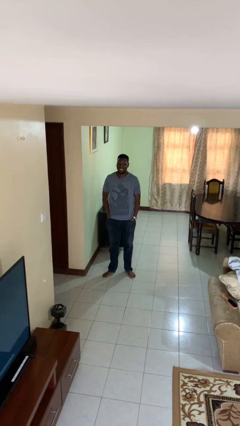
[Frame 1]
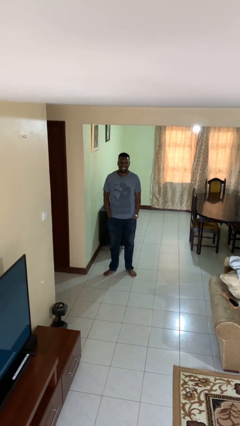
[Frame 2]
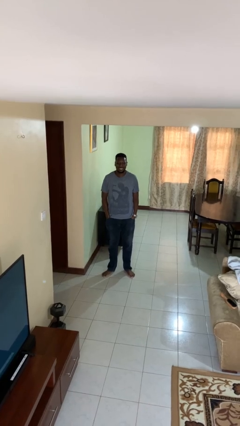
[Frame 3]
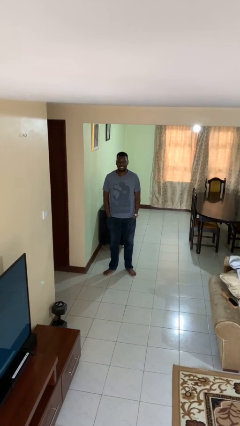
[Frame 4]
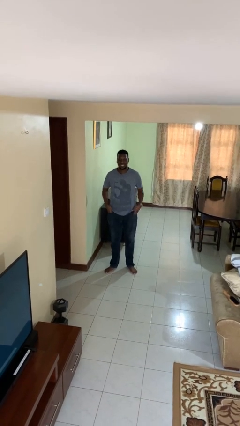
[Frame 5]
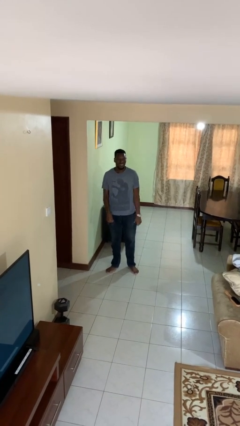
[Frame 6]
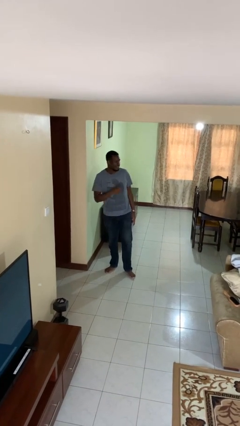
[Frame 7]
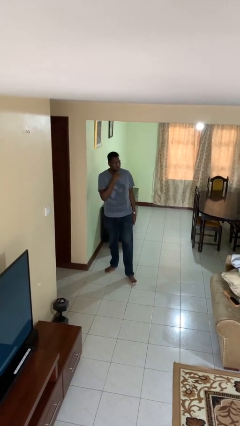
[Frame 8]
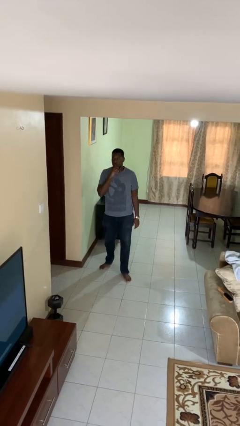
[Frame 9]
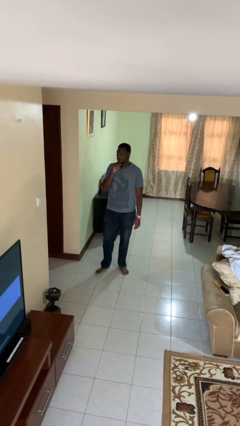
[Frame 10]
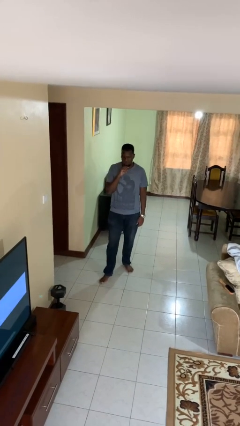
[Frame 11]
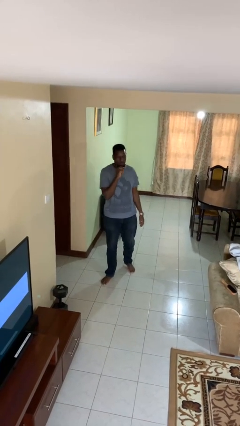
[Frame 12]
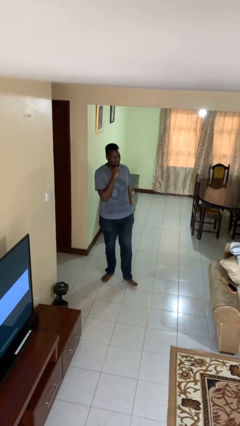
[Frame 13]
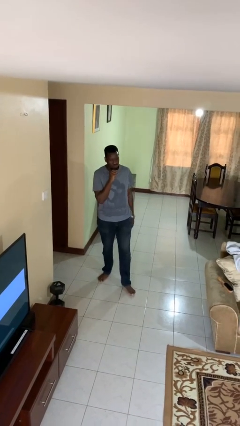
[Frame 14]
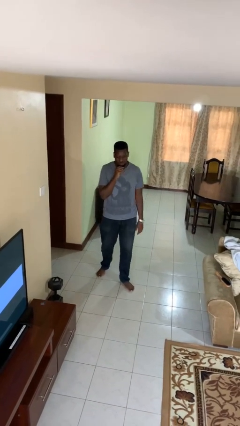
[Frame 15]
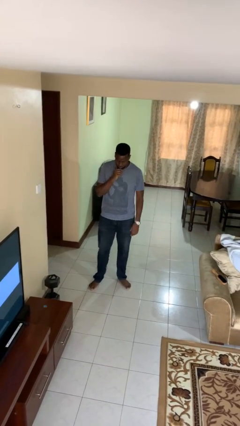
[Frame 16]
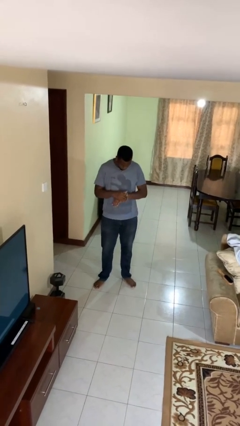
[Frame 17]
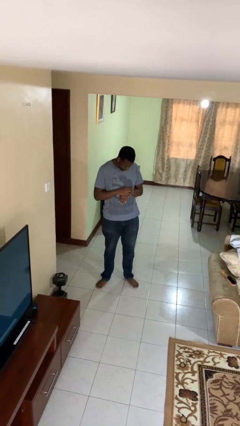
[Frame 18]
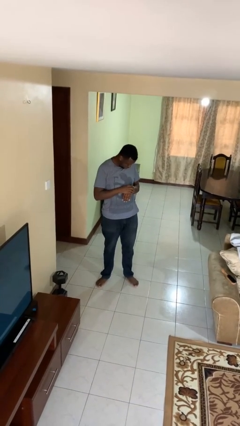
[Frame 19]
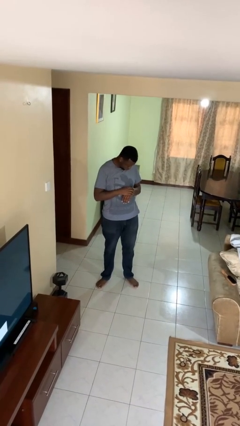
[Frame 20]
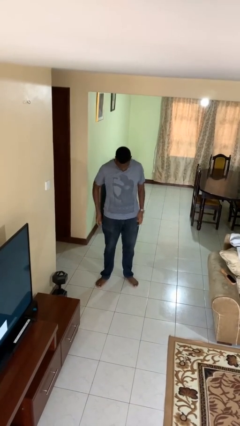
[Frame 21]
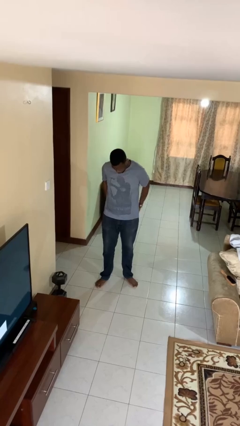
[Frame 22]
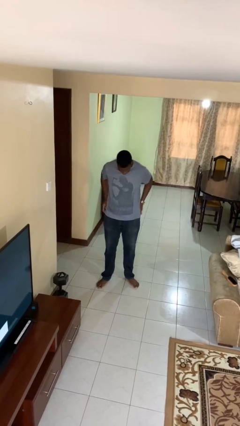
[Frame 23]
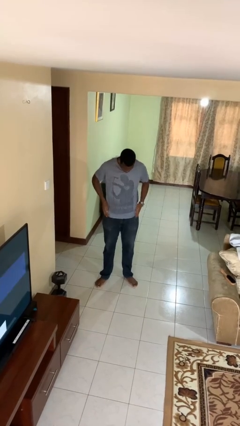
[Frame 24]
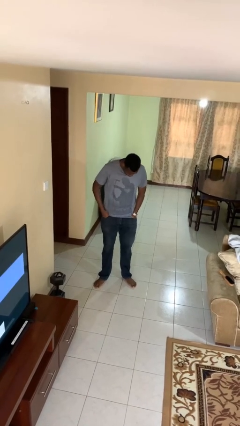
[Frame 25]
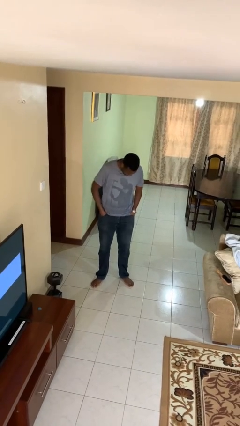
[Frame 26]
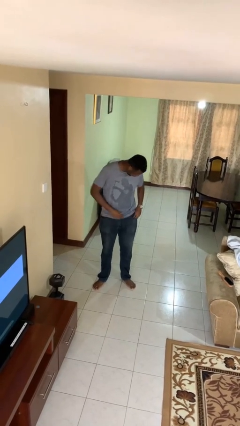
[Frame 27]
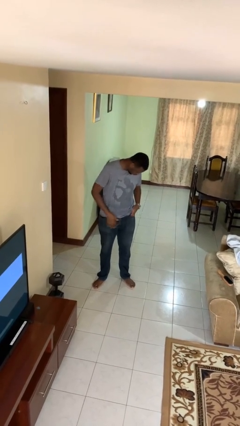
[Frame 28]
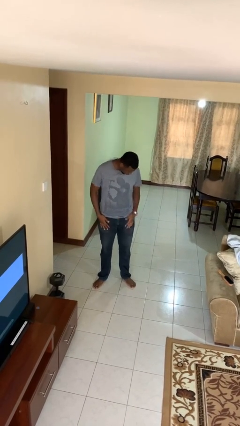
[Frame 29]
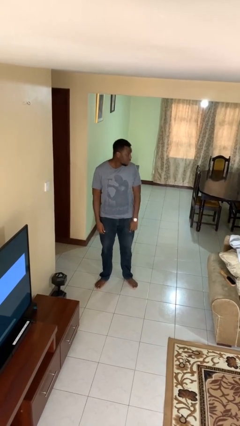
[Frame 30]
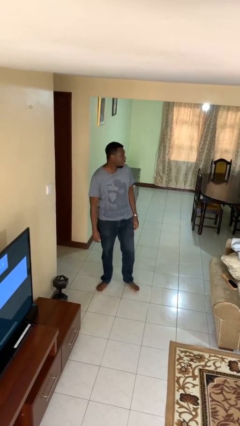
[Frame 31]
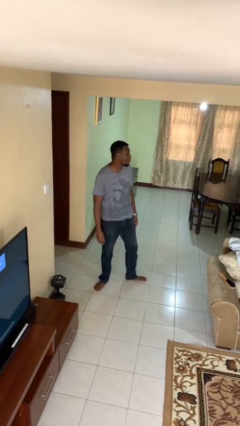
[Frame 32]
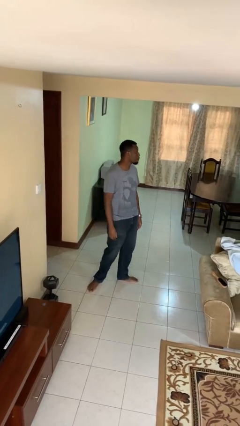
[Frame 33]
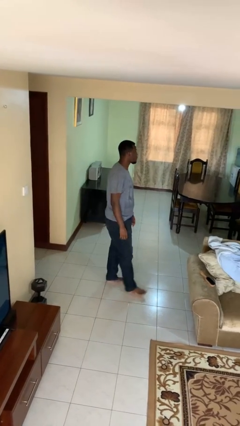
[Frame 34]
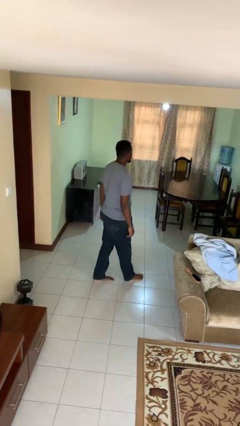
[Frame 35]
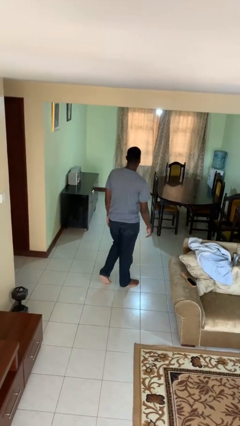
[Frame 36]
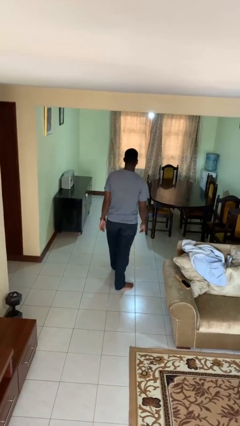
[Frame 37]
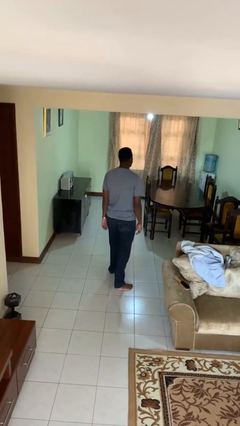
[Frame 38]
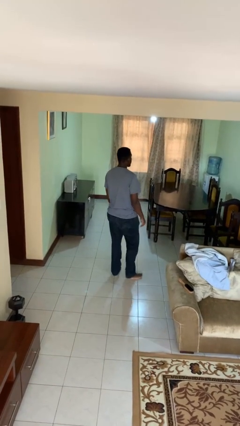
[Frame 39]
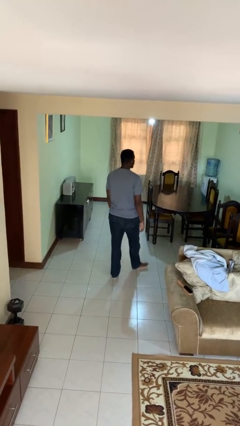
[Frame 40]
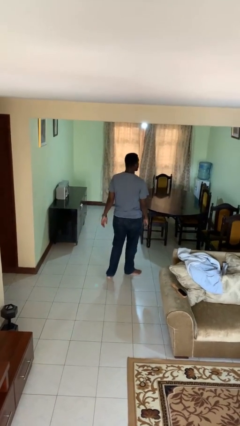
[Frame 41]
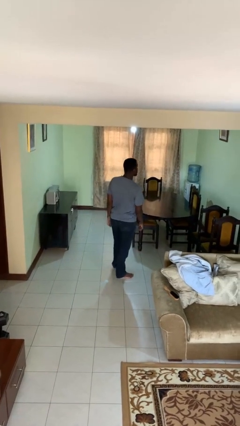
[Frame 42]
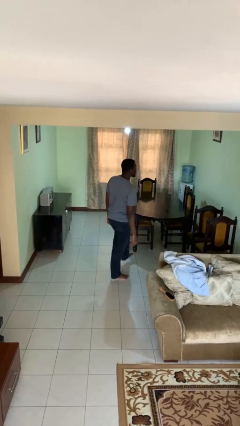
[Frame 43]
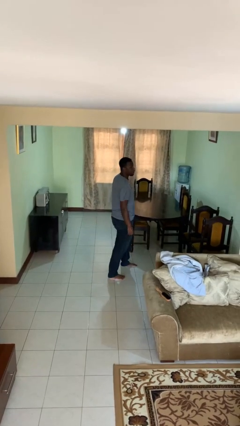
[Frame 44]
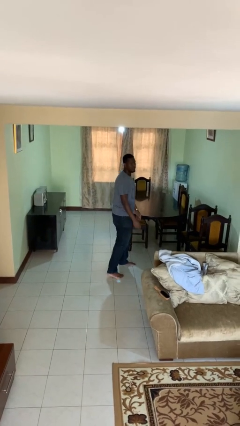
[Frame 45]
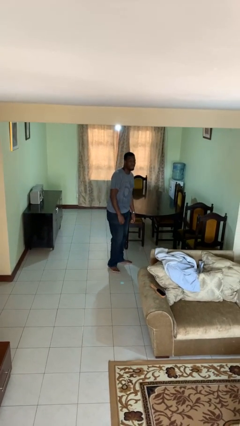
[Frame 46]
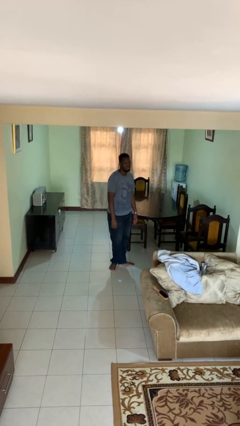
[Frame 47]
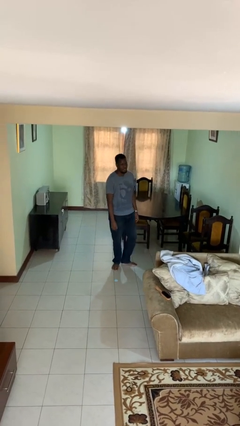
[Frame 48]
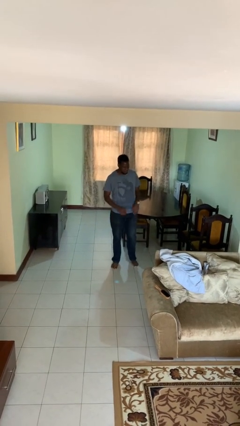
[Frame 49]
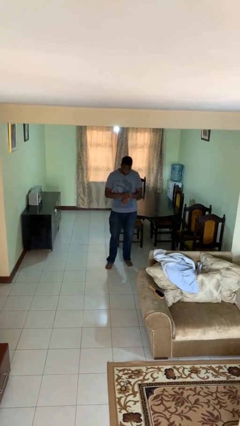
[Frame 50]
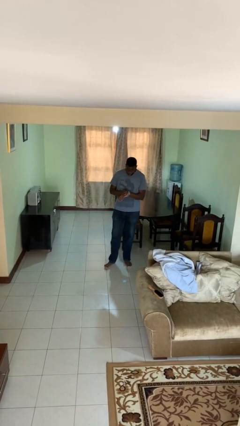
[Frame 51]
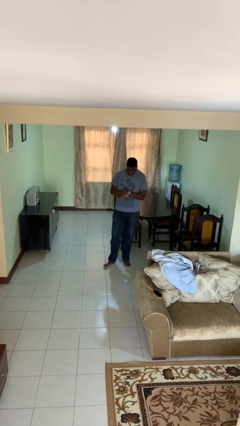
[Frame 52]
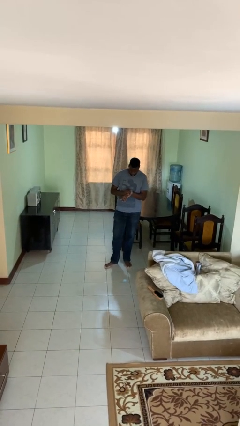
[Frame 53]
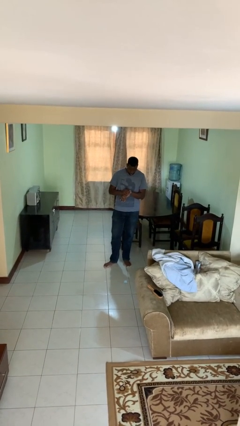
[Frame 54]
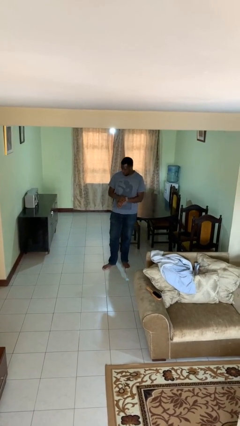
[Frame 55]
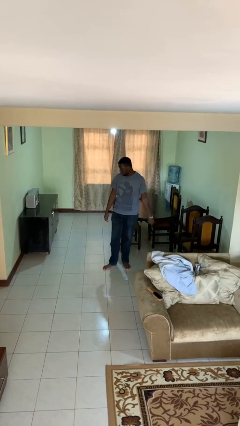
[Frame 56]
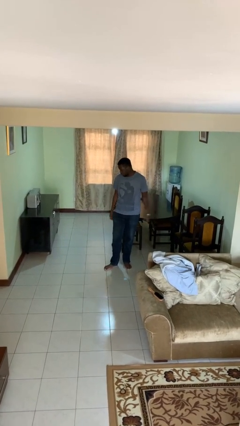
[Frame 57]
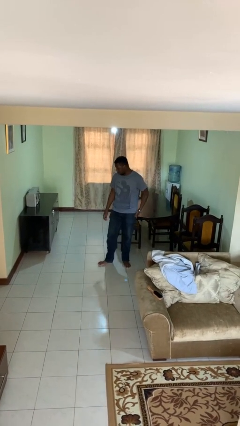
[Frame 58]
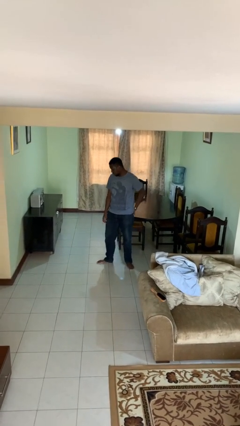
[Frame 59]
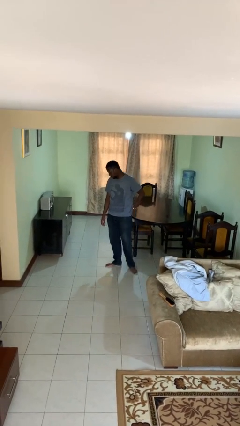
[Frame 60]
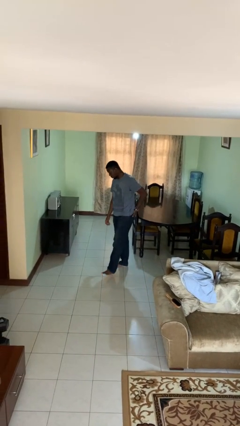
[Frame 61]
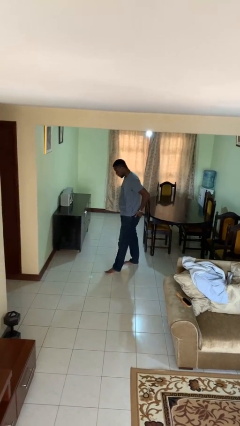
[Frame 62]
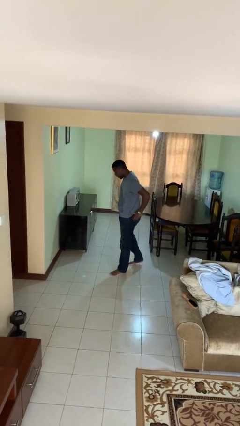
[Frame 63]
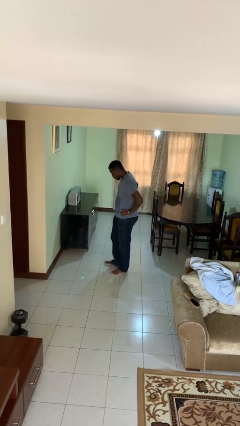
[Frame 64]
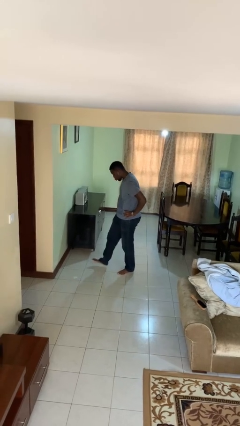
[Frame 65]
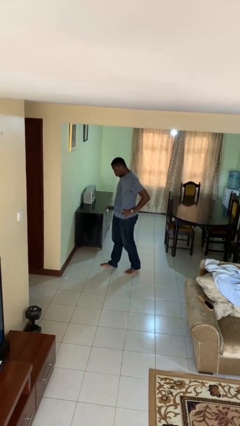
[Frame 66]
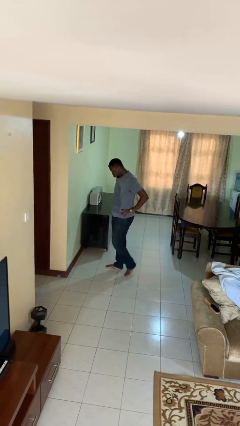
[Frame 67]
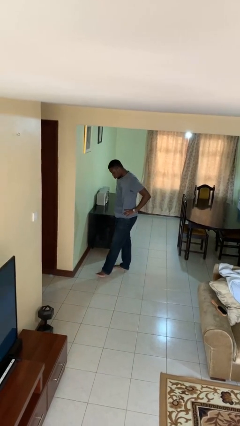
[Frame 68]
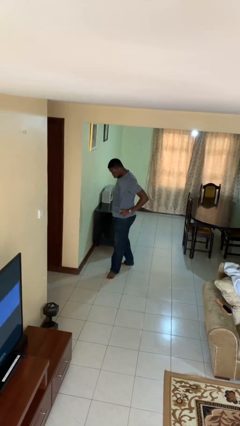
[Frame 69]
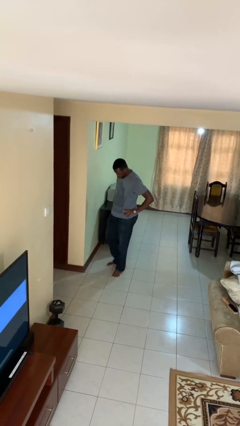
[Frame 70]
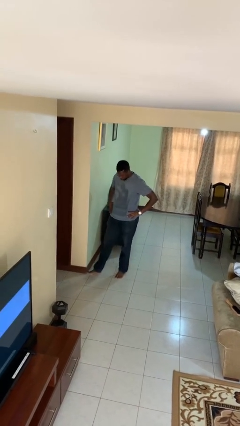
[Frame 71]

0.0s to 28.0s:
person walks

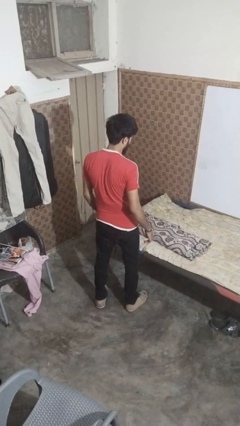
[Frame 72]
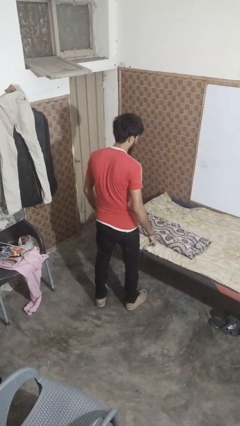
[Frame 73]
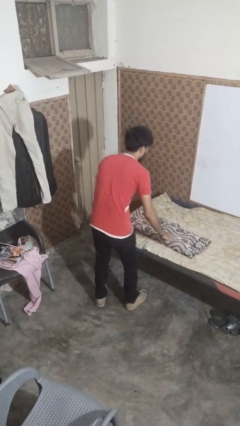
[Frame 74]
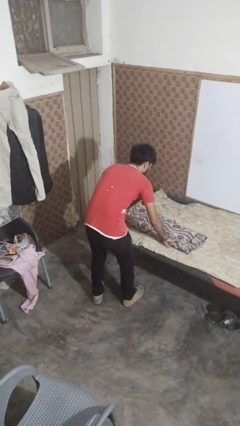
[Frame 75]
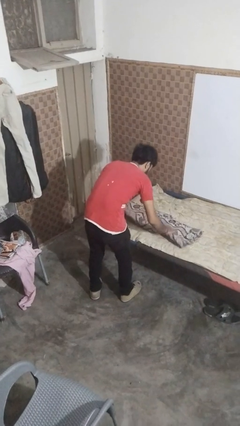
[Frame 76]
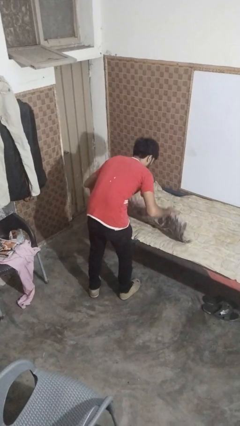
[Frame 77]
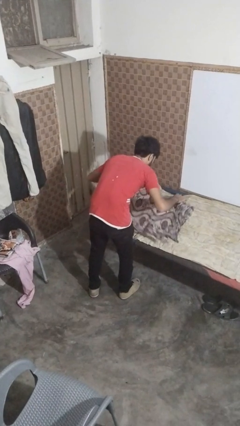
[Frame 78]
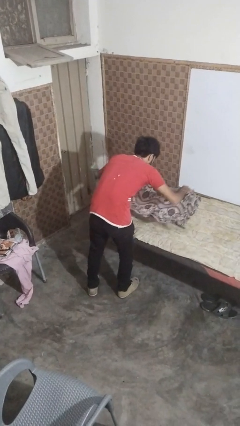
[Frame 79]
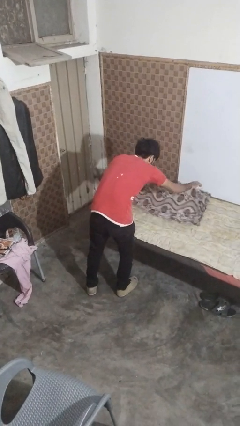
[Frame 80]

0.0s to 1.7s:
person unfolds blanket

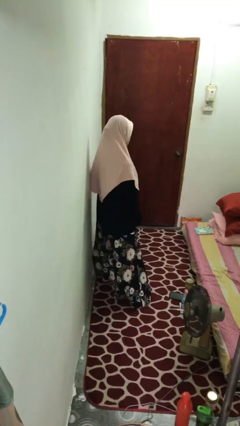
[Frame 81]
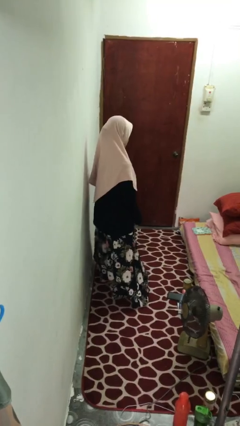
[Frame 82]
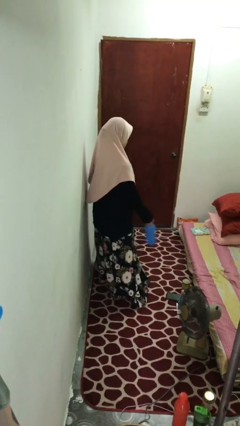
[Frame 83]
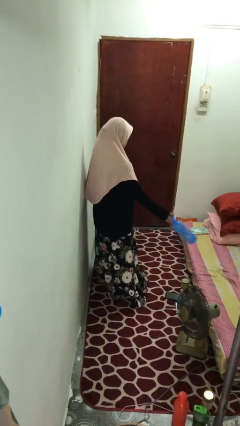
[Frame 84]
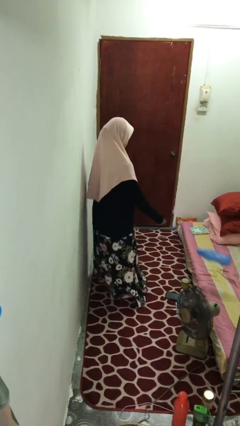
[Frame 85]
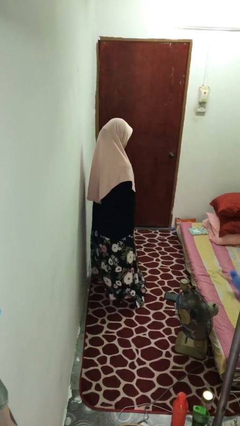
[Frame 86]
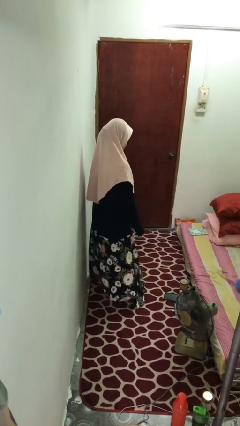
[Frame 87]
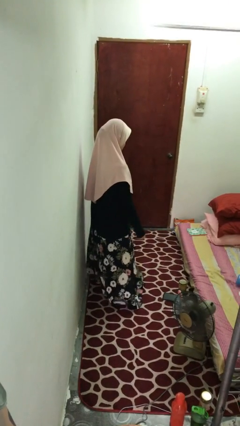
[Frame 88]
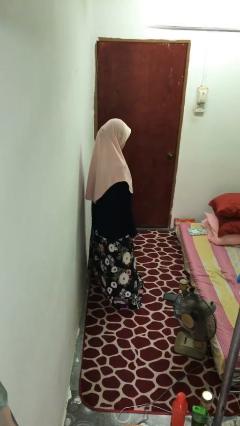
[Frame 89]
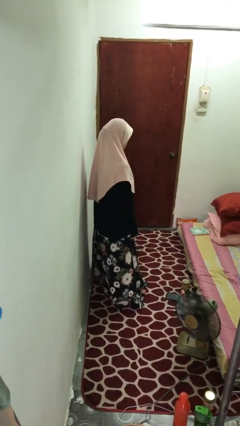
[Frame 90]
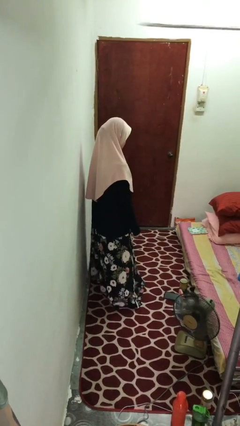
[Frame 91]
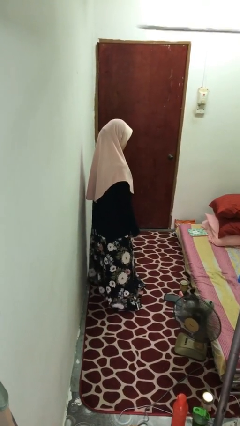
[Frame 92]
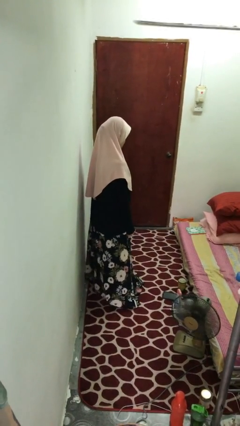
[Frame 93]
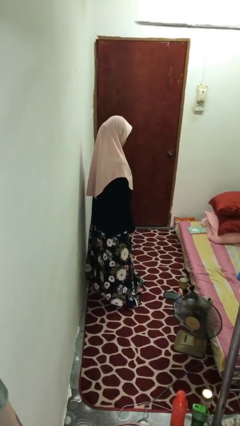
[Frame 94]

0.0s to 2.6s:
person throws object on bed
